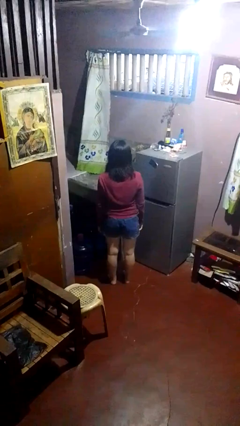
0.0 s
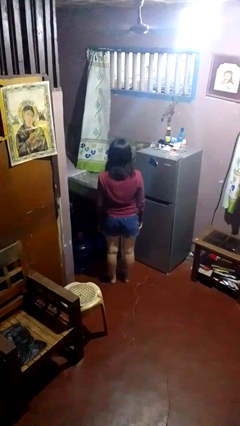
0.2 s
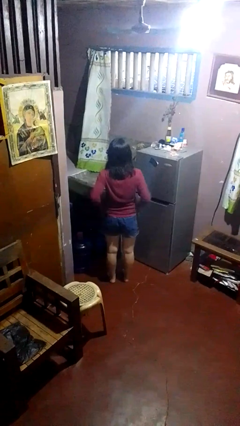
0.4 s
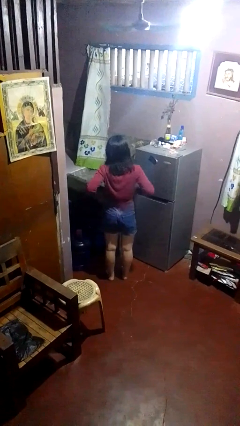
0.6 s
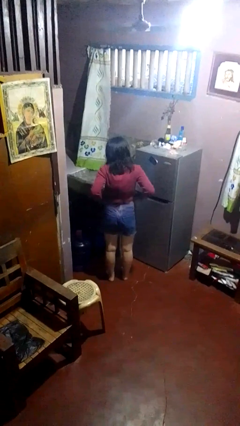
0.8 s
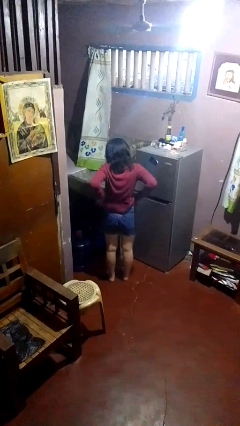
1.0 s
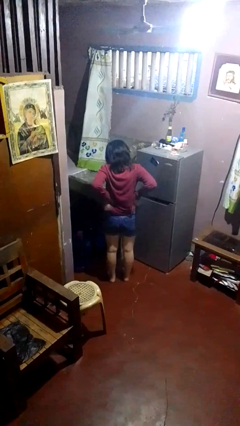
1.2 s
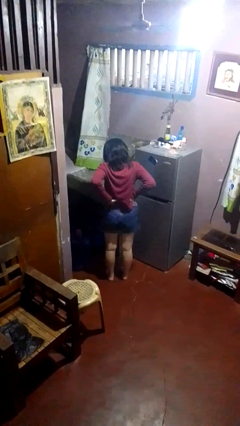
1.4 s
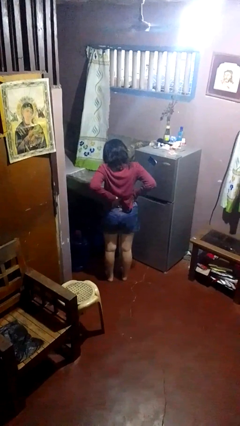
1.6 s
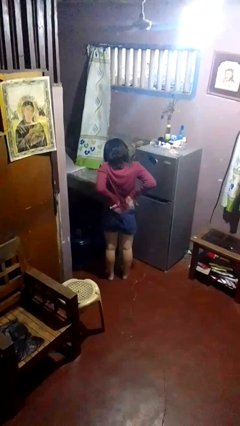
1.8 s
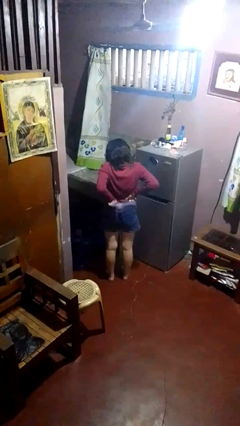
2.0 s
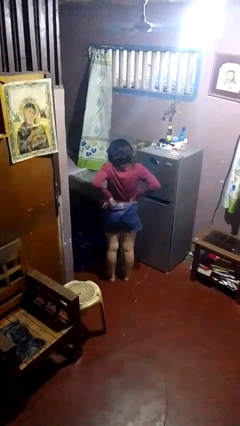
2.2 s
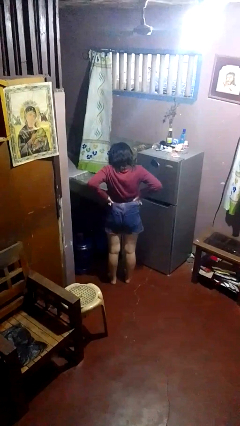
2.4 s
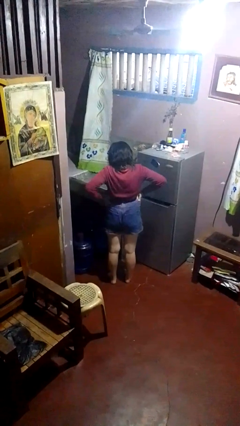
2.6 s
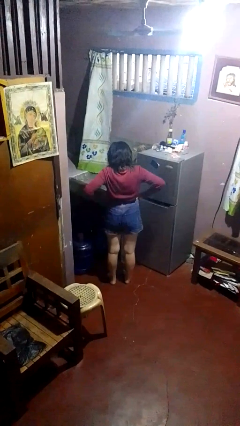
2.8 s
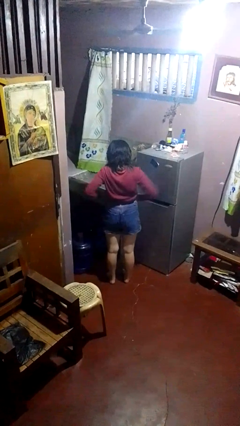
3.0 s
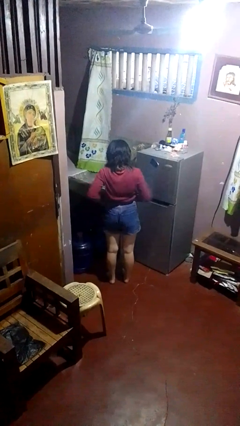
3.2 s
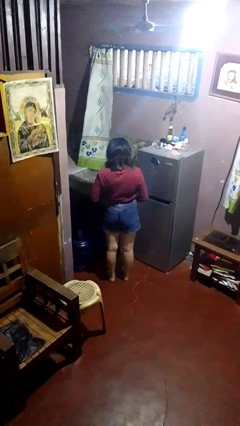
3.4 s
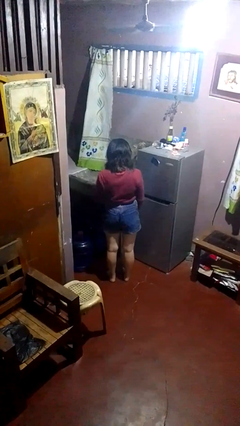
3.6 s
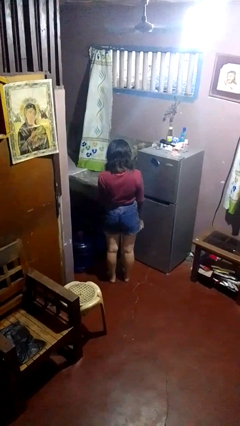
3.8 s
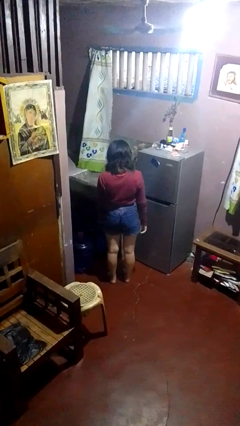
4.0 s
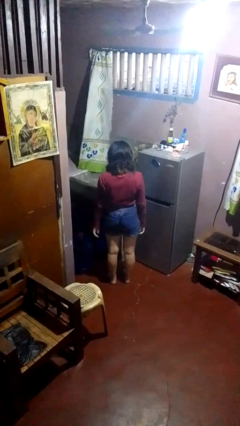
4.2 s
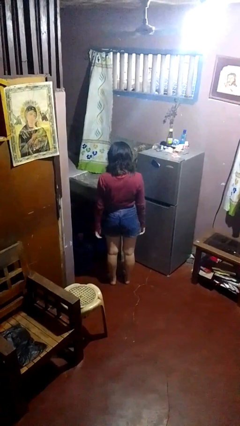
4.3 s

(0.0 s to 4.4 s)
person tucks in shirt

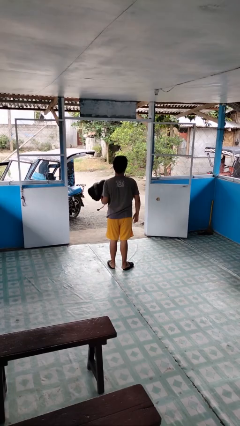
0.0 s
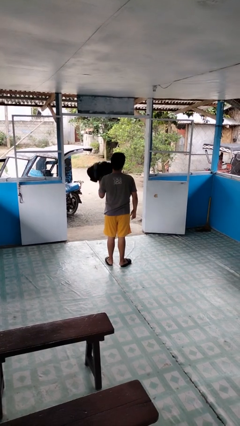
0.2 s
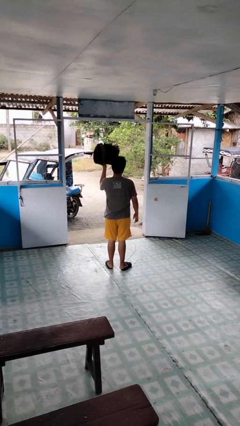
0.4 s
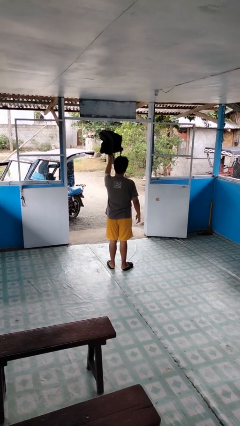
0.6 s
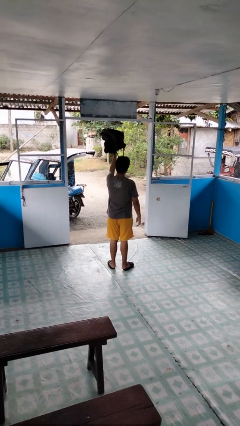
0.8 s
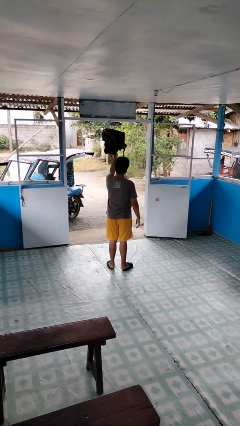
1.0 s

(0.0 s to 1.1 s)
person holds object above head

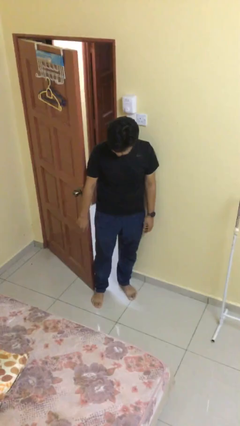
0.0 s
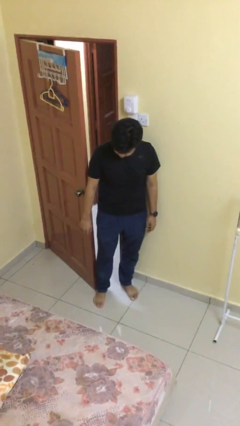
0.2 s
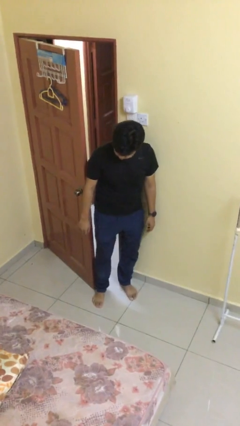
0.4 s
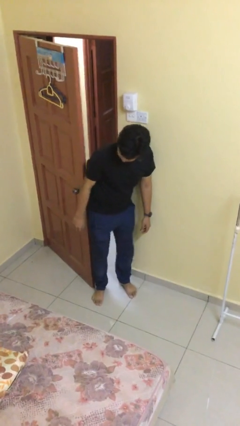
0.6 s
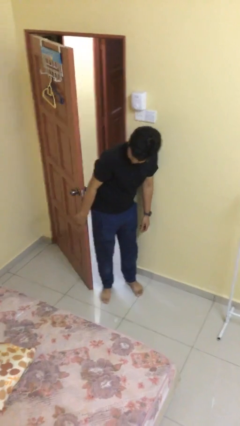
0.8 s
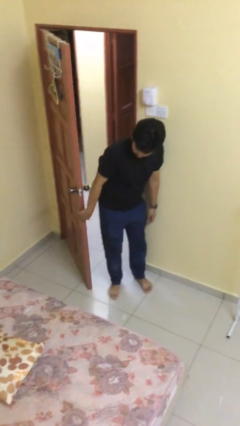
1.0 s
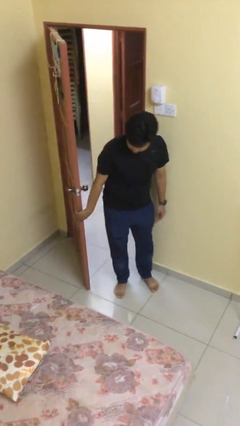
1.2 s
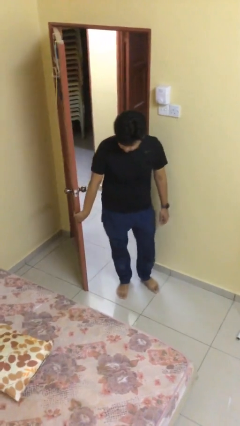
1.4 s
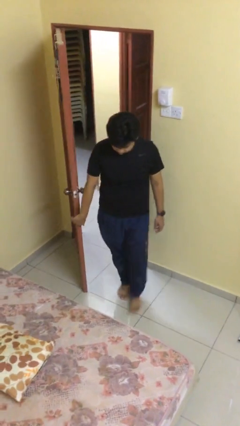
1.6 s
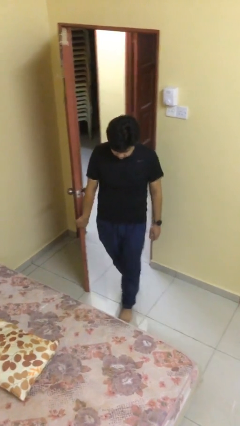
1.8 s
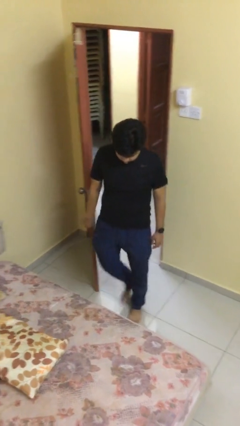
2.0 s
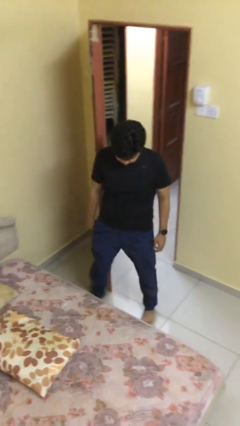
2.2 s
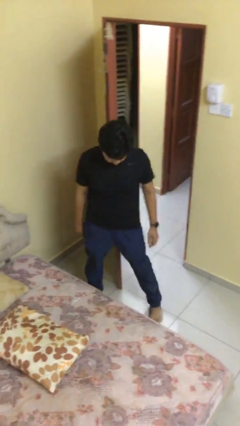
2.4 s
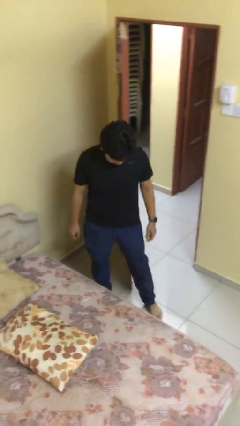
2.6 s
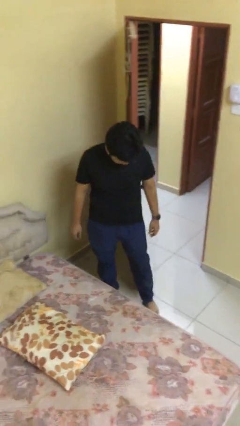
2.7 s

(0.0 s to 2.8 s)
person opens facility door

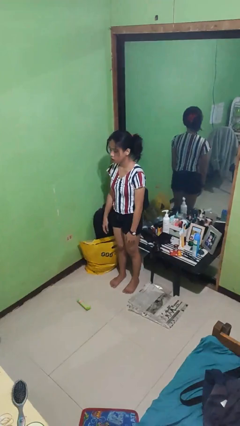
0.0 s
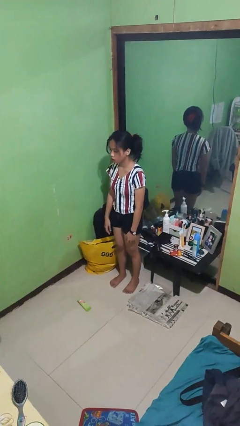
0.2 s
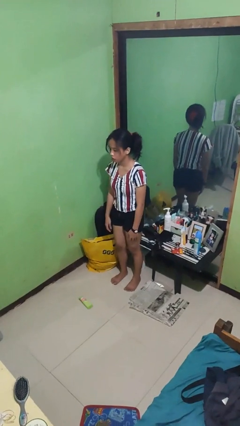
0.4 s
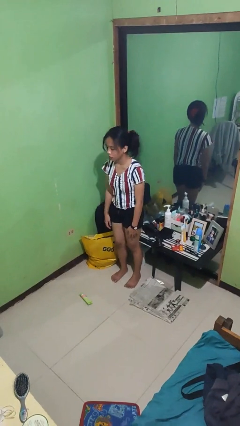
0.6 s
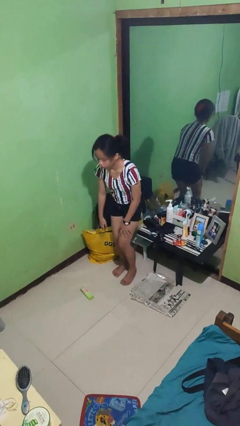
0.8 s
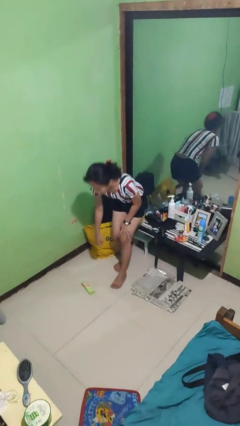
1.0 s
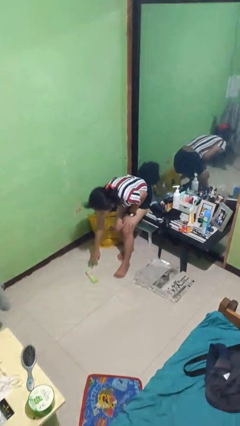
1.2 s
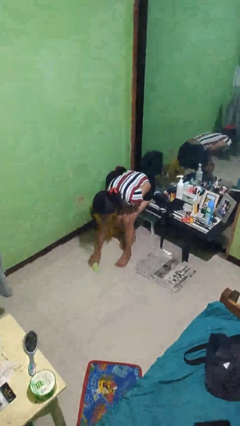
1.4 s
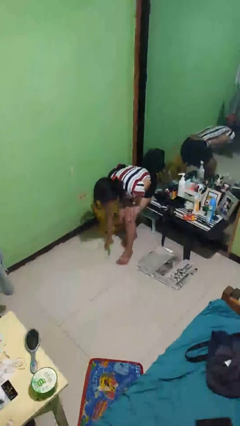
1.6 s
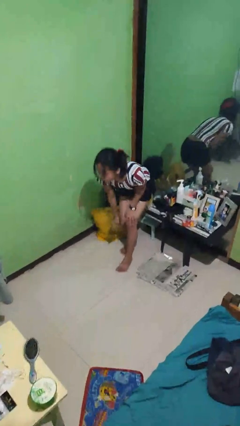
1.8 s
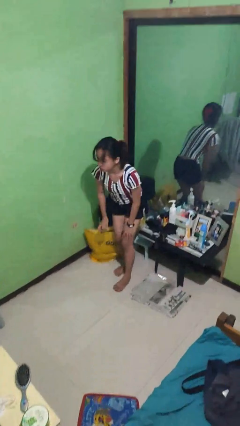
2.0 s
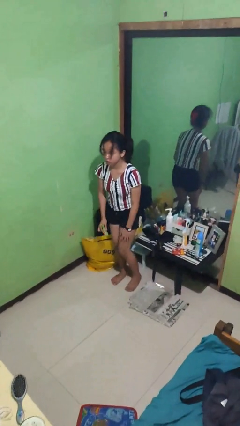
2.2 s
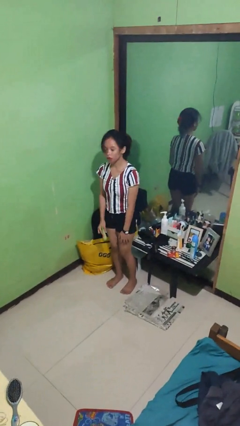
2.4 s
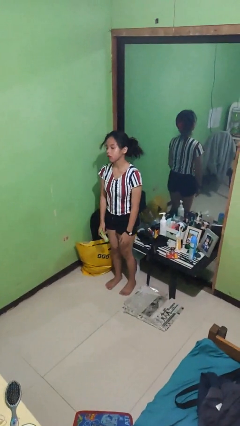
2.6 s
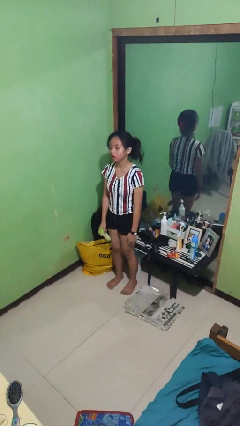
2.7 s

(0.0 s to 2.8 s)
person picks up object from floor

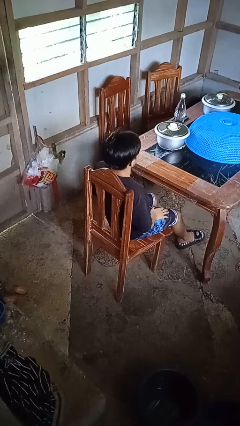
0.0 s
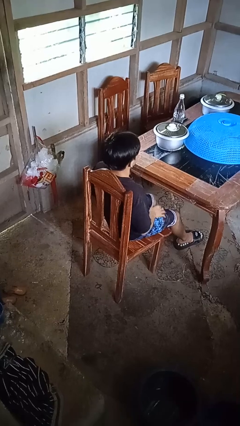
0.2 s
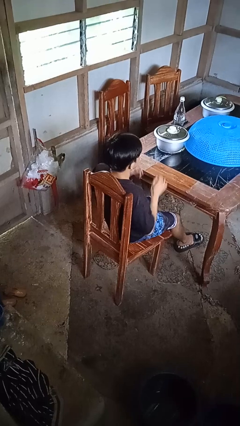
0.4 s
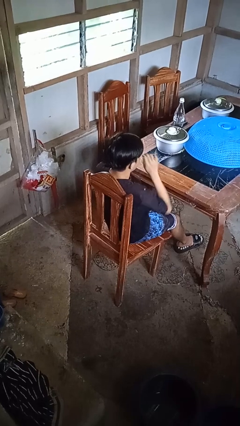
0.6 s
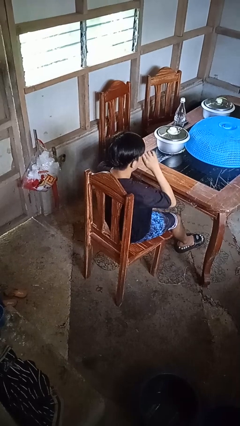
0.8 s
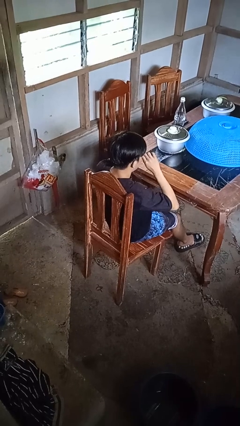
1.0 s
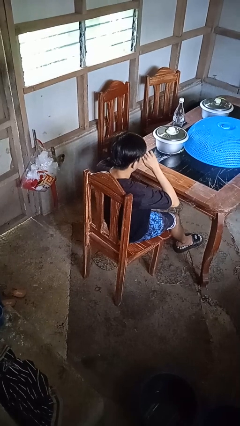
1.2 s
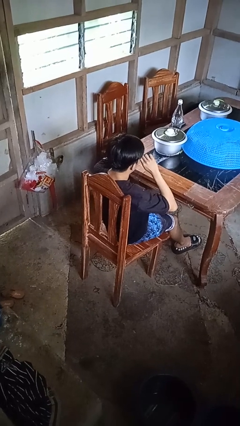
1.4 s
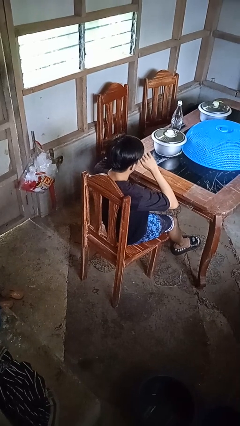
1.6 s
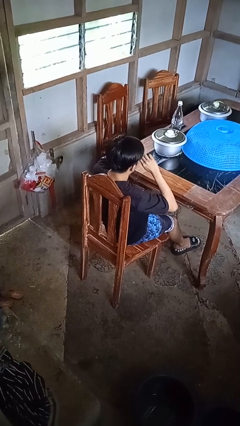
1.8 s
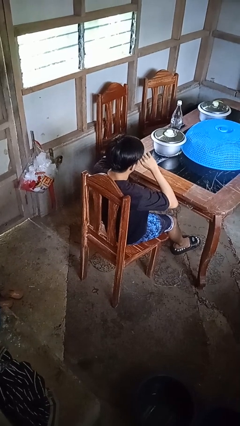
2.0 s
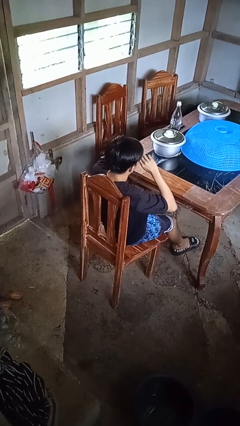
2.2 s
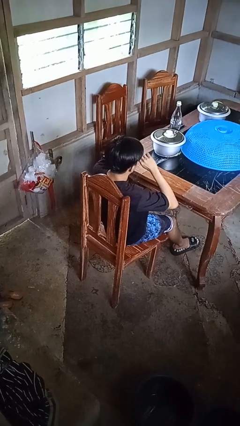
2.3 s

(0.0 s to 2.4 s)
person rubs eyes

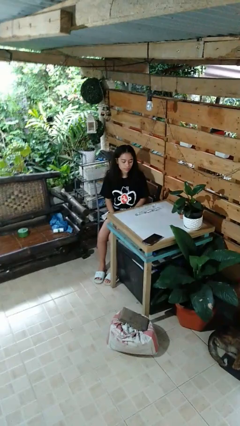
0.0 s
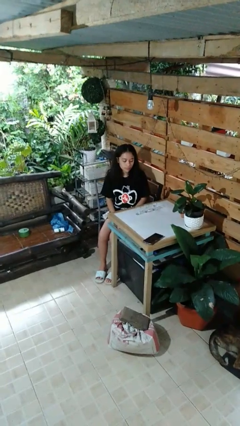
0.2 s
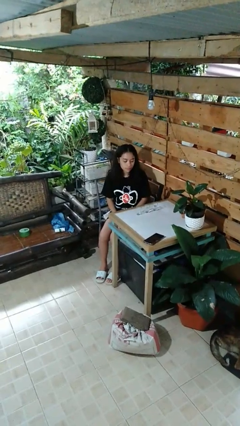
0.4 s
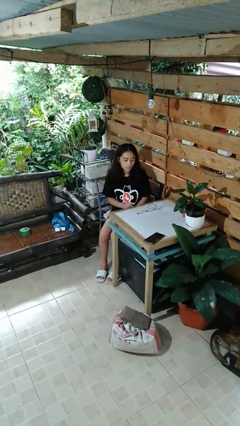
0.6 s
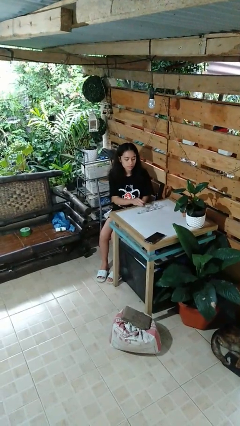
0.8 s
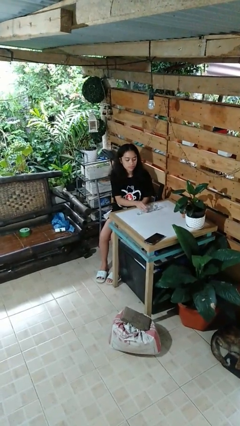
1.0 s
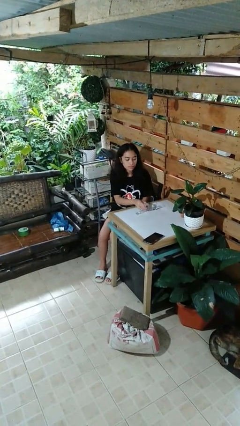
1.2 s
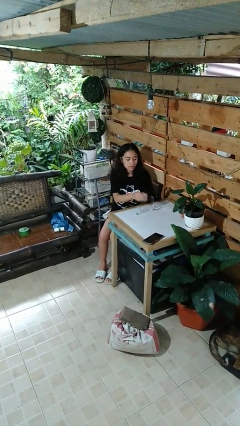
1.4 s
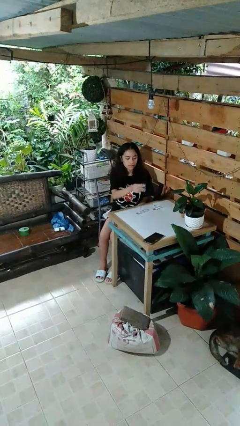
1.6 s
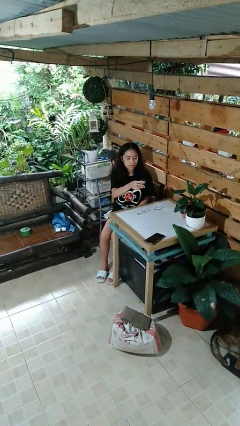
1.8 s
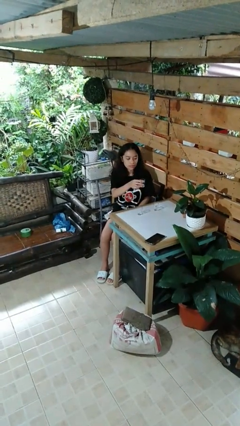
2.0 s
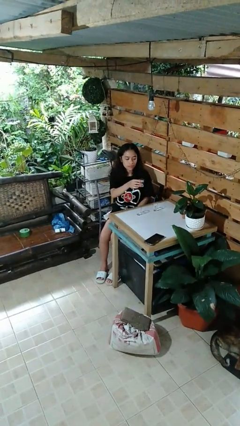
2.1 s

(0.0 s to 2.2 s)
person picks up object from table

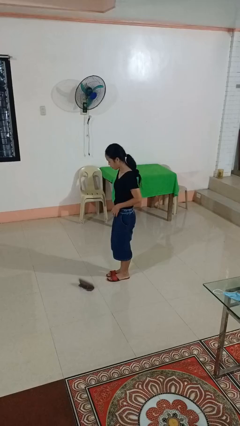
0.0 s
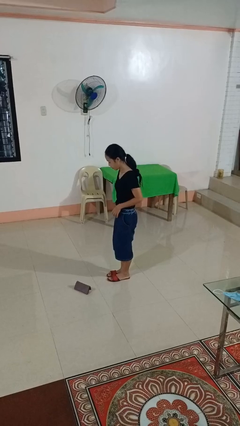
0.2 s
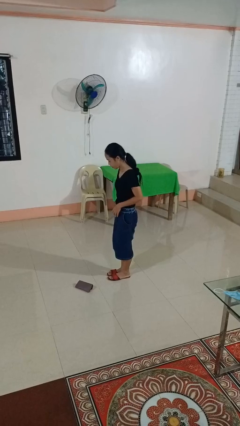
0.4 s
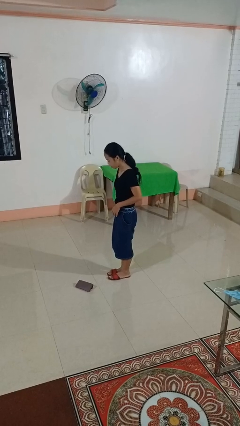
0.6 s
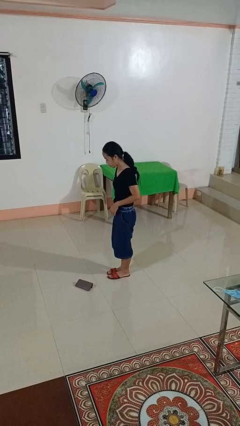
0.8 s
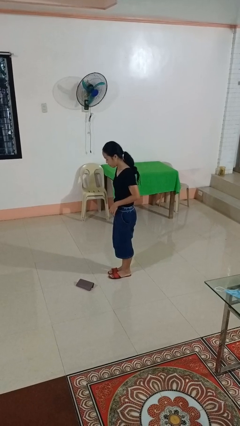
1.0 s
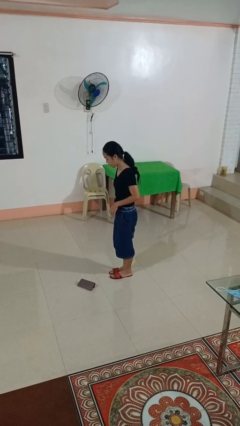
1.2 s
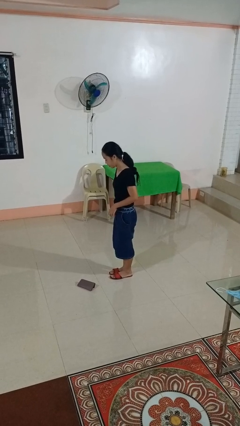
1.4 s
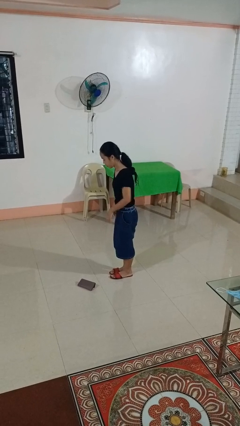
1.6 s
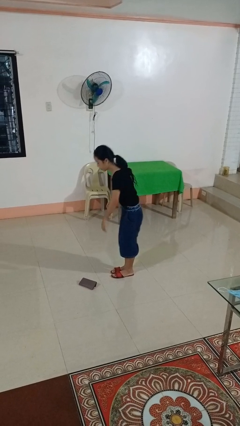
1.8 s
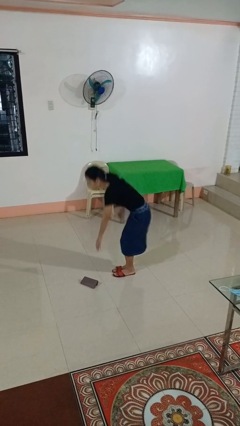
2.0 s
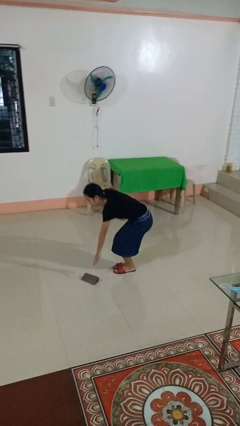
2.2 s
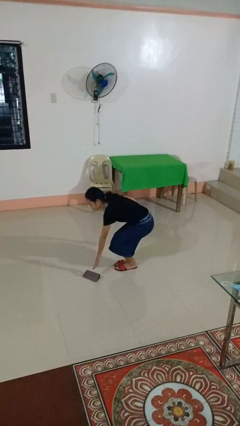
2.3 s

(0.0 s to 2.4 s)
person throws object into air
